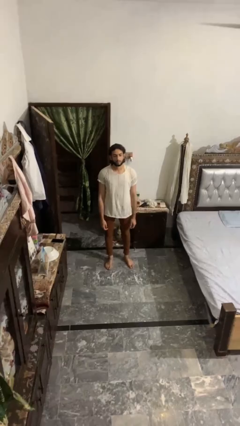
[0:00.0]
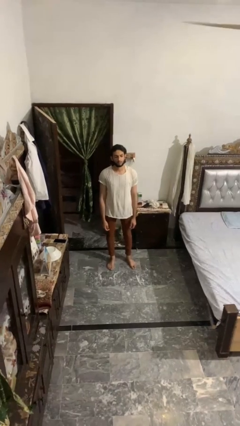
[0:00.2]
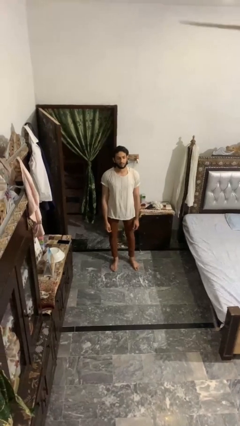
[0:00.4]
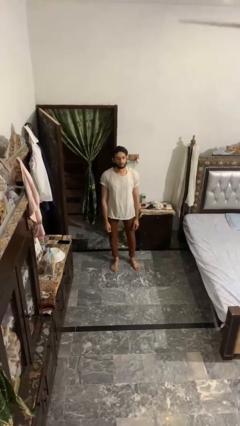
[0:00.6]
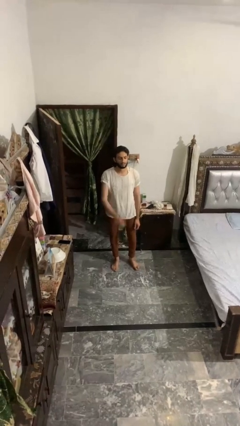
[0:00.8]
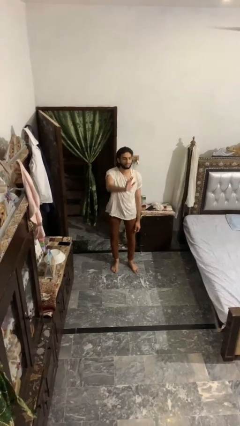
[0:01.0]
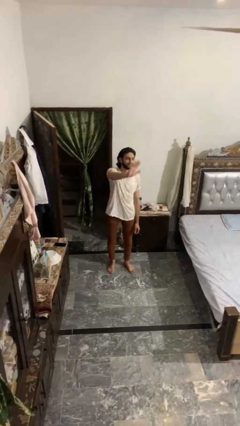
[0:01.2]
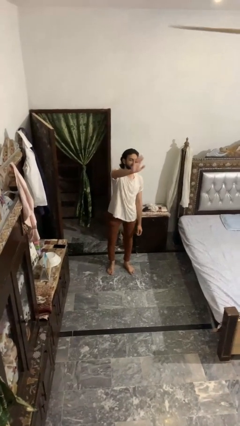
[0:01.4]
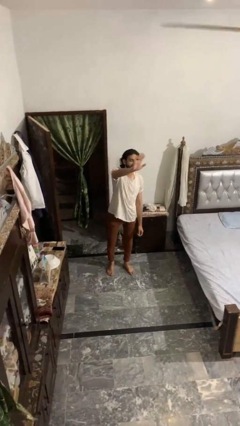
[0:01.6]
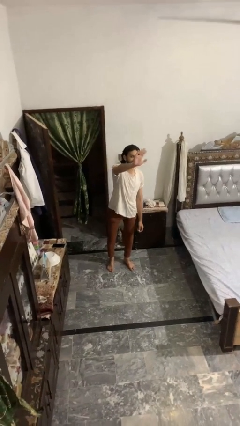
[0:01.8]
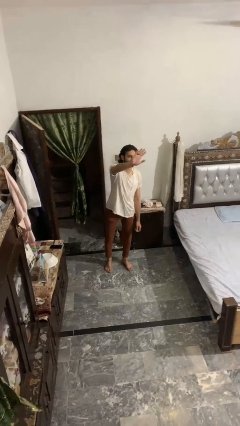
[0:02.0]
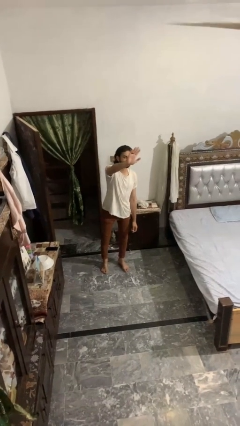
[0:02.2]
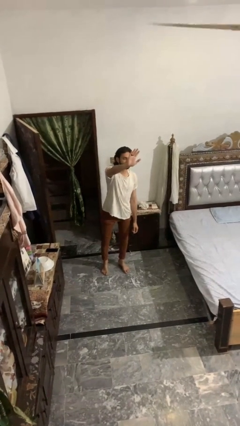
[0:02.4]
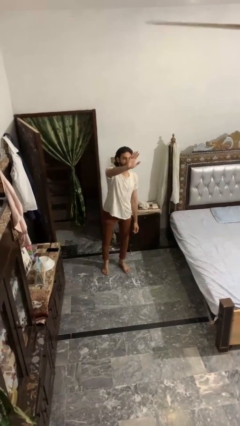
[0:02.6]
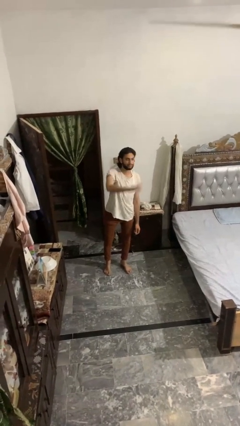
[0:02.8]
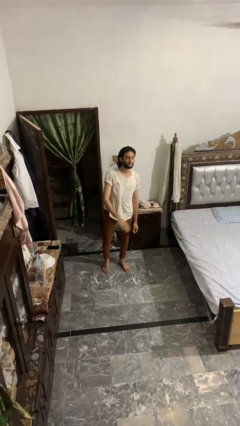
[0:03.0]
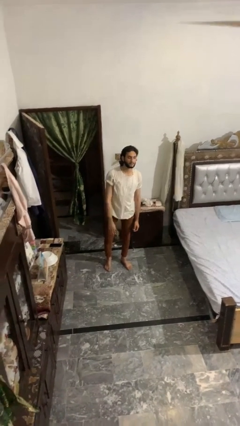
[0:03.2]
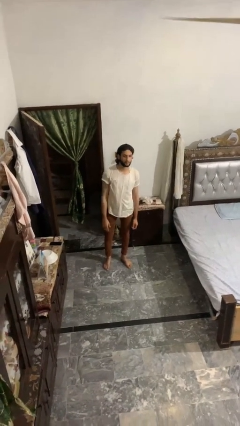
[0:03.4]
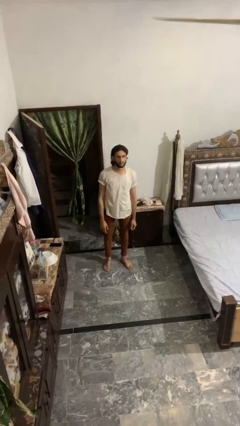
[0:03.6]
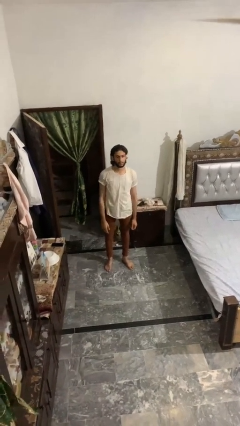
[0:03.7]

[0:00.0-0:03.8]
person waves at person

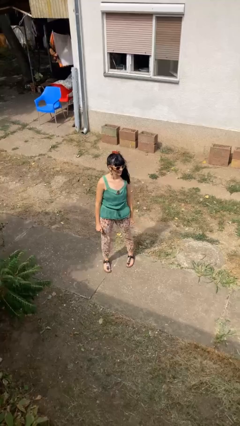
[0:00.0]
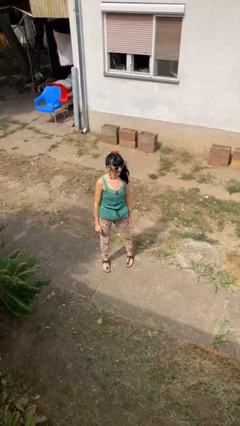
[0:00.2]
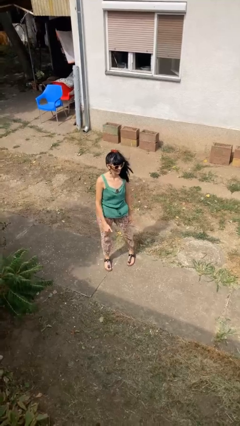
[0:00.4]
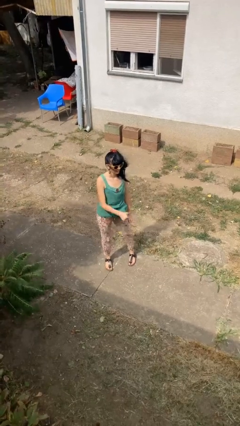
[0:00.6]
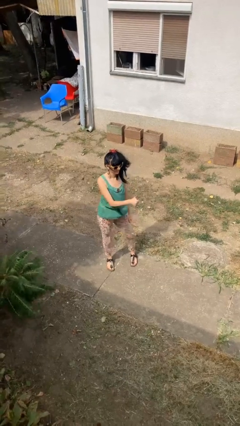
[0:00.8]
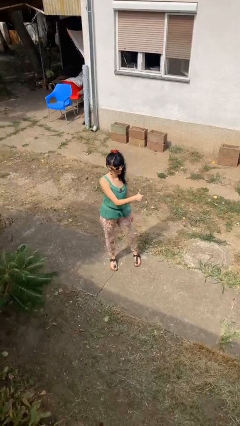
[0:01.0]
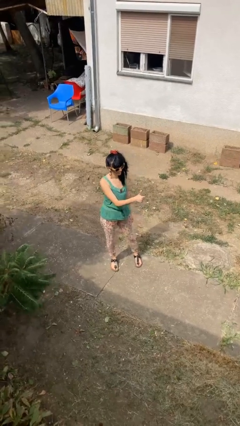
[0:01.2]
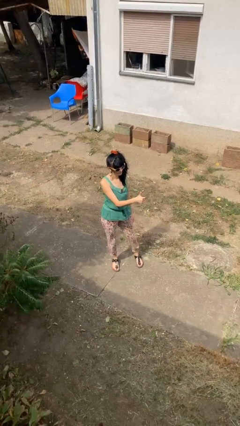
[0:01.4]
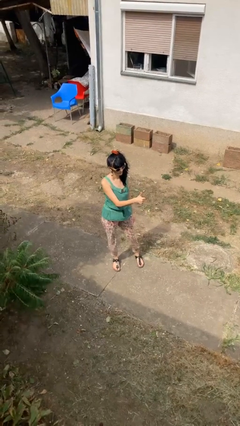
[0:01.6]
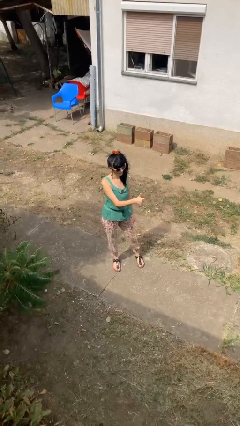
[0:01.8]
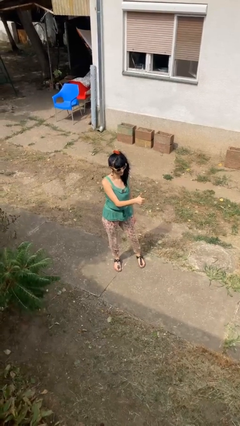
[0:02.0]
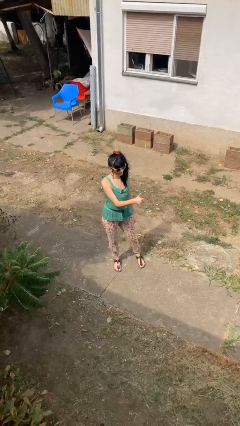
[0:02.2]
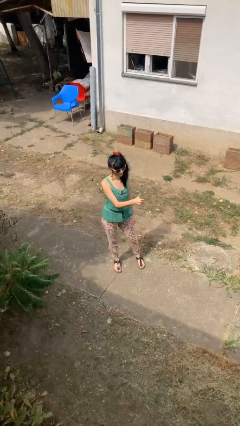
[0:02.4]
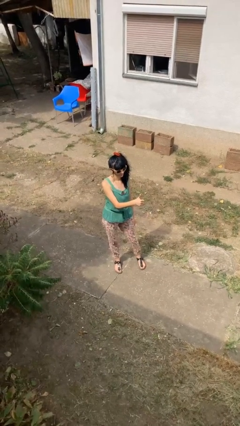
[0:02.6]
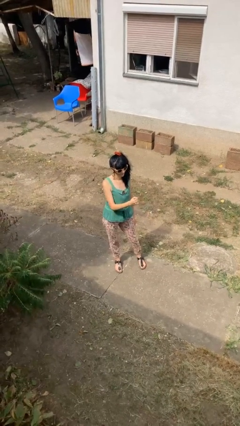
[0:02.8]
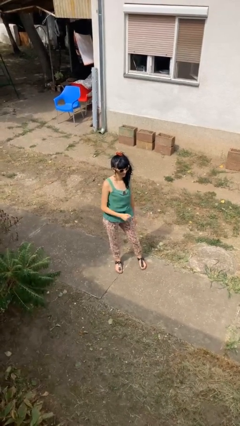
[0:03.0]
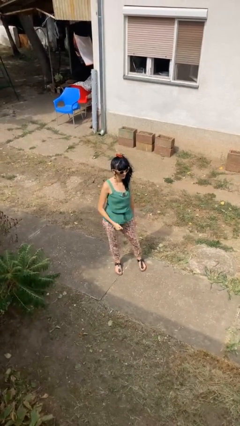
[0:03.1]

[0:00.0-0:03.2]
person gestures thumbs up

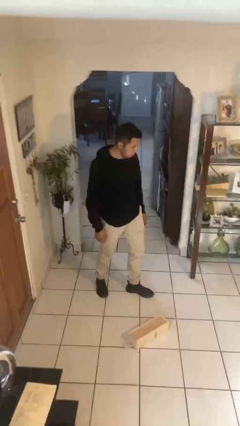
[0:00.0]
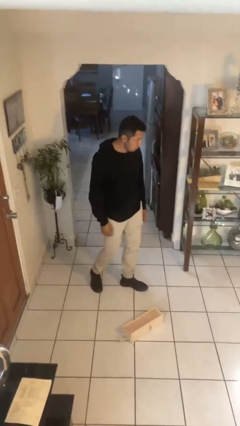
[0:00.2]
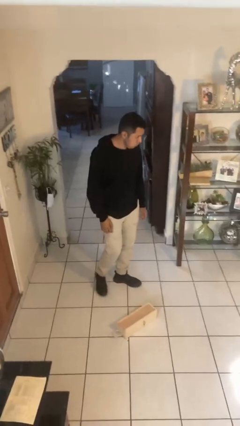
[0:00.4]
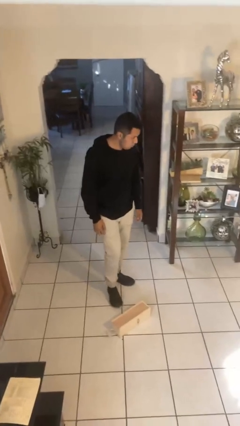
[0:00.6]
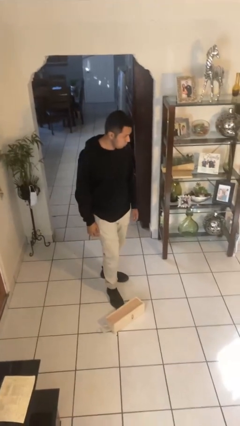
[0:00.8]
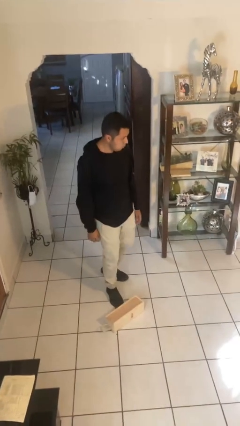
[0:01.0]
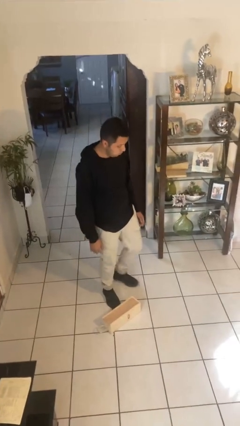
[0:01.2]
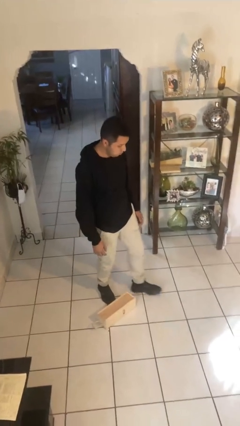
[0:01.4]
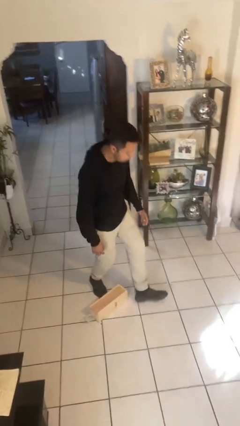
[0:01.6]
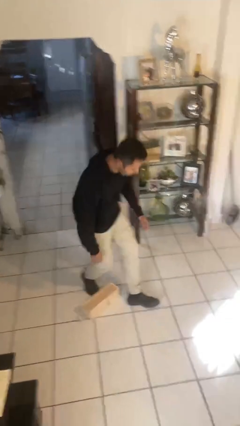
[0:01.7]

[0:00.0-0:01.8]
person trips on object on floor

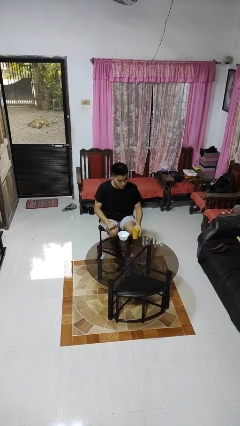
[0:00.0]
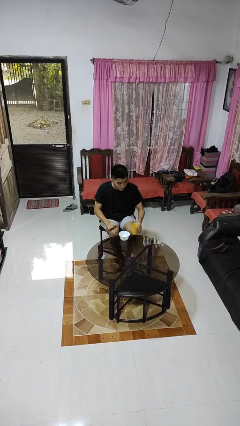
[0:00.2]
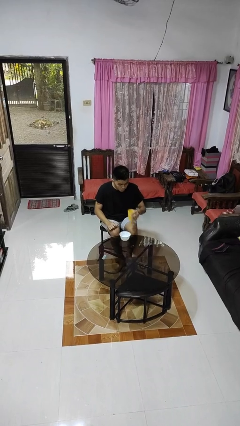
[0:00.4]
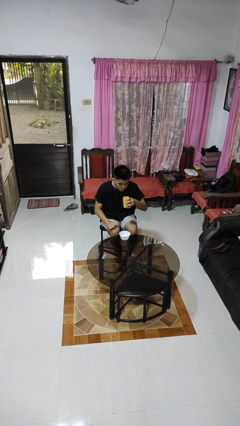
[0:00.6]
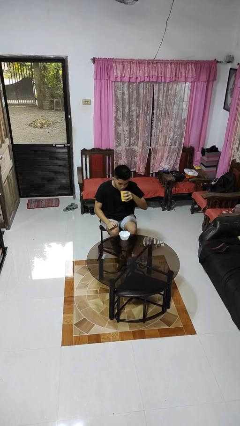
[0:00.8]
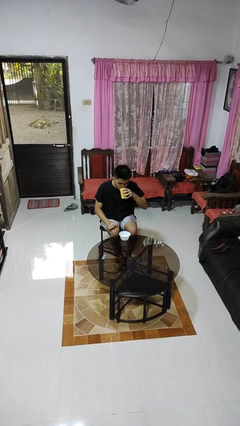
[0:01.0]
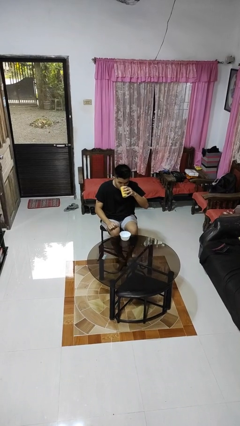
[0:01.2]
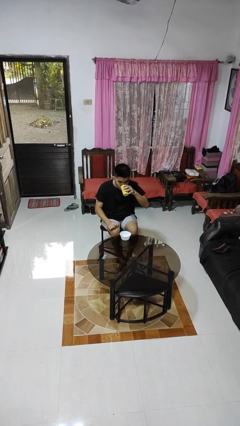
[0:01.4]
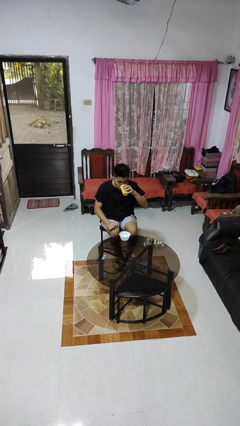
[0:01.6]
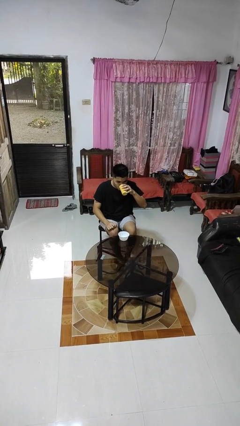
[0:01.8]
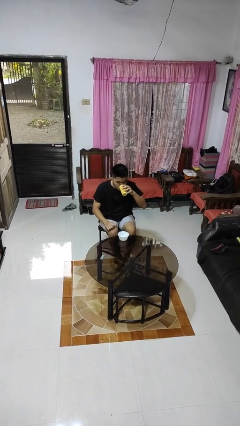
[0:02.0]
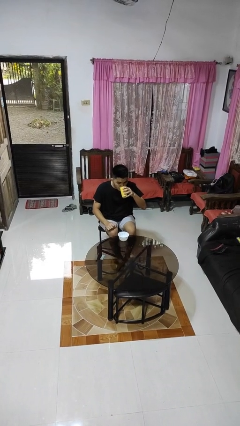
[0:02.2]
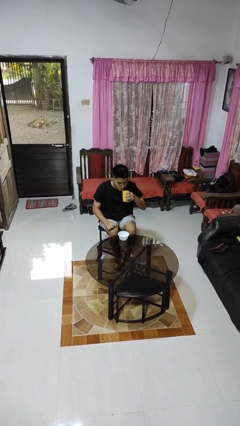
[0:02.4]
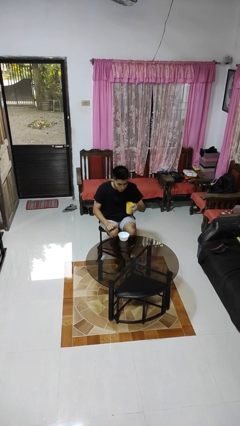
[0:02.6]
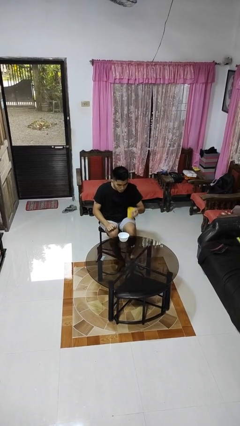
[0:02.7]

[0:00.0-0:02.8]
person drinks from cup

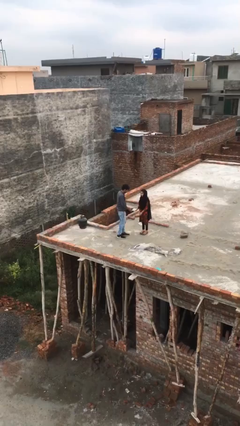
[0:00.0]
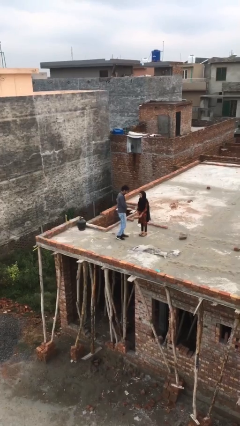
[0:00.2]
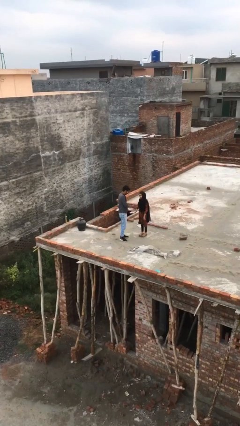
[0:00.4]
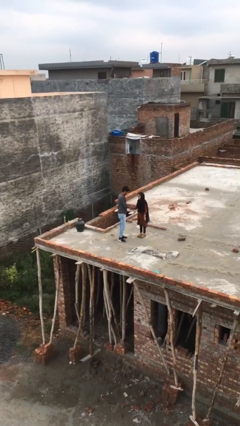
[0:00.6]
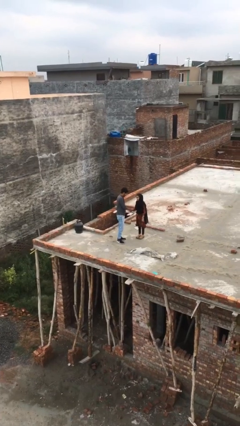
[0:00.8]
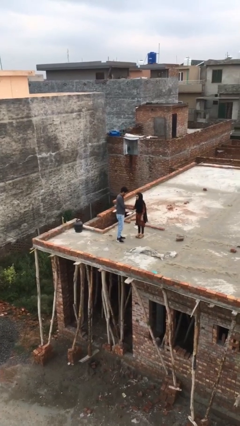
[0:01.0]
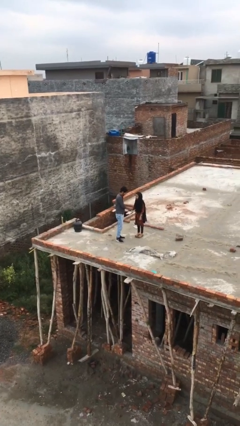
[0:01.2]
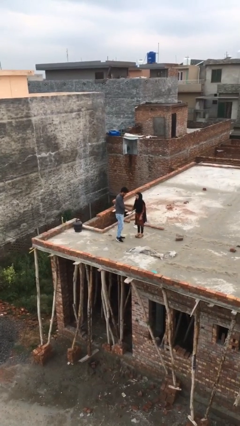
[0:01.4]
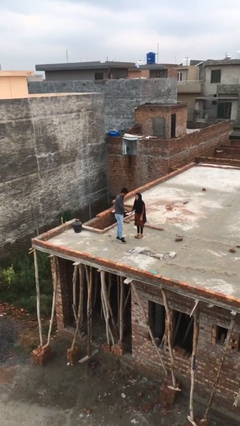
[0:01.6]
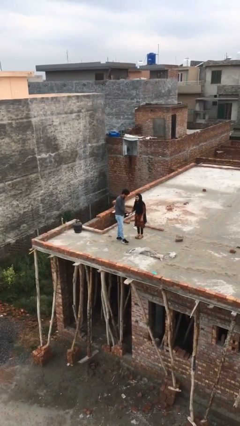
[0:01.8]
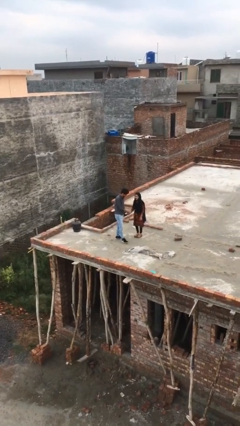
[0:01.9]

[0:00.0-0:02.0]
person shakes hand

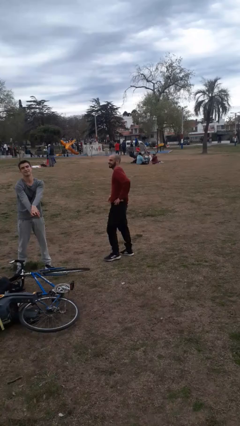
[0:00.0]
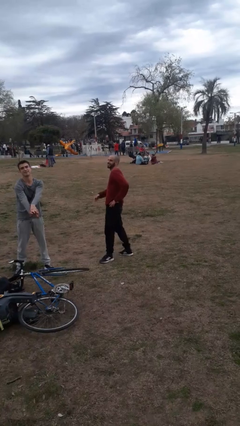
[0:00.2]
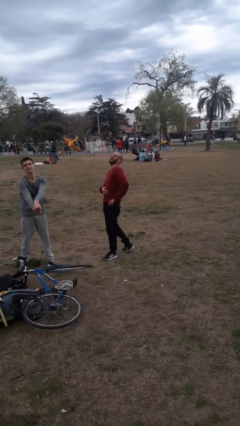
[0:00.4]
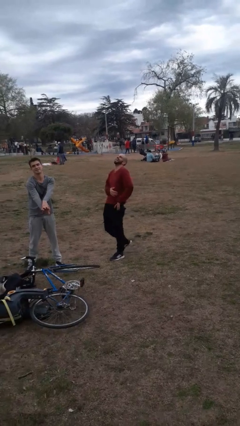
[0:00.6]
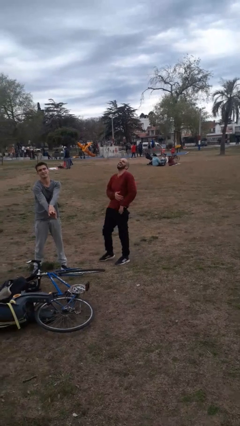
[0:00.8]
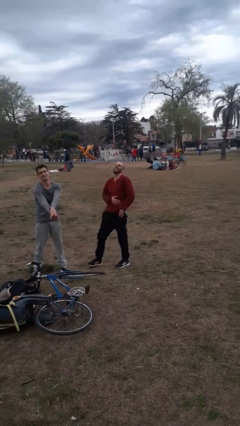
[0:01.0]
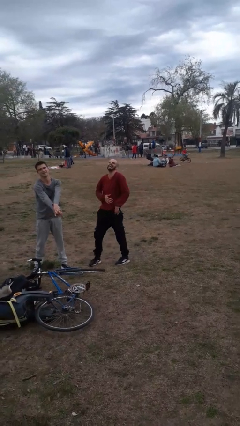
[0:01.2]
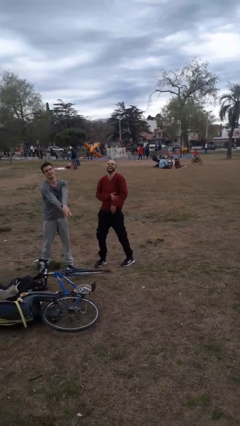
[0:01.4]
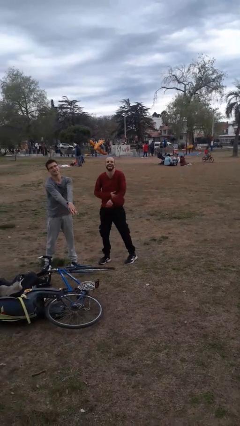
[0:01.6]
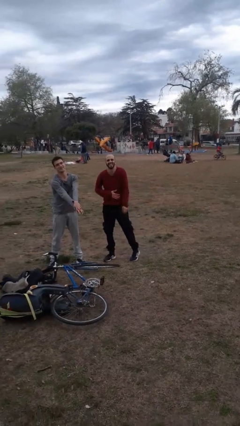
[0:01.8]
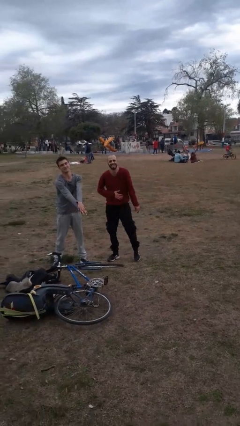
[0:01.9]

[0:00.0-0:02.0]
person laughs with person

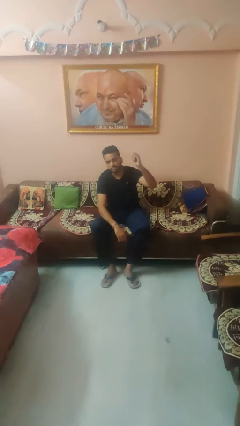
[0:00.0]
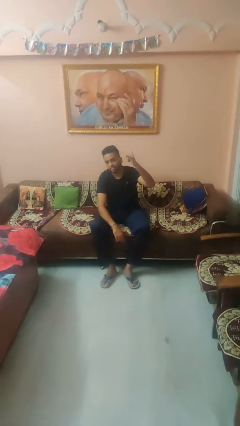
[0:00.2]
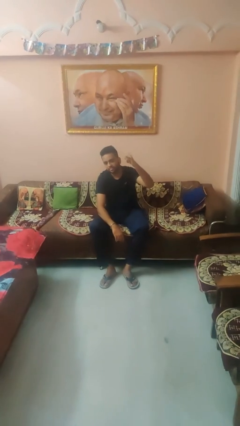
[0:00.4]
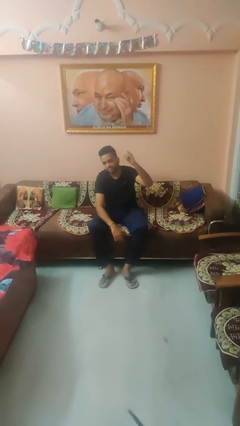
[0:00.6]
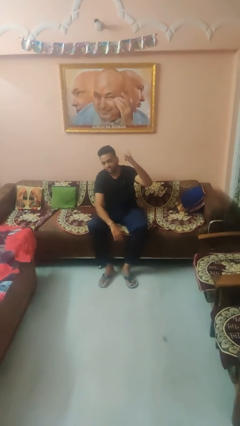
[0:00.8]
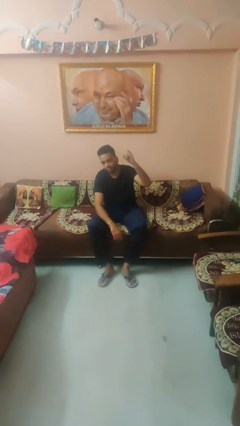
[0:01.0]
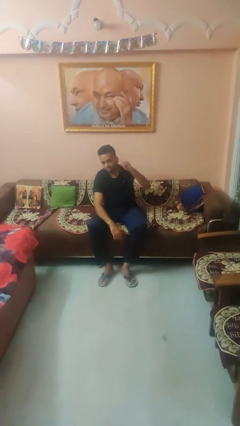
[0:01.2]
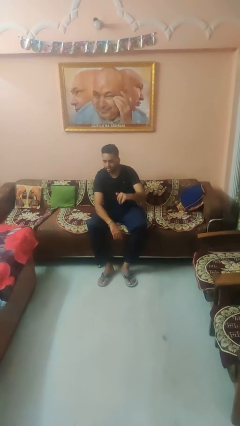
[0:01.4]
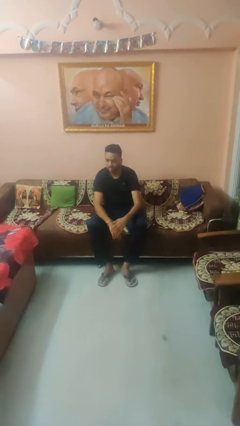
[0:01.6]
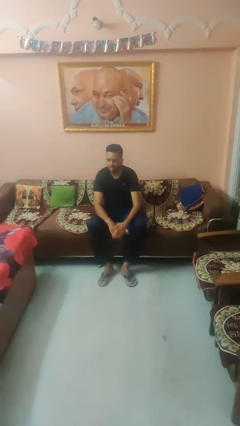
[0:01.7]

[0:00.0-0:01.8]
person gestures hang loose
